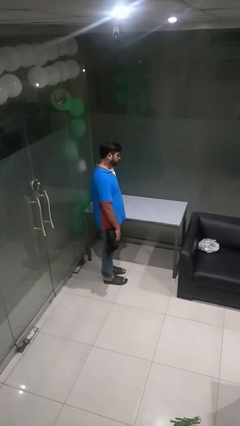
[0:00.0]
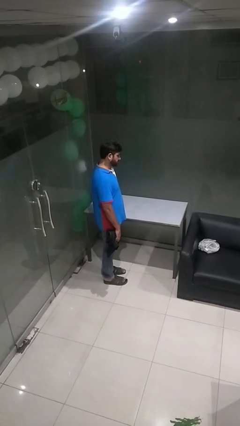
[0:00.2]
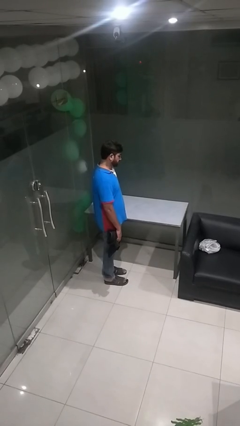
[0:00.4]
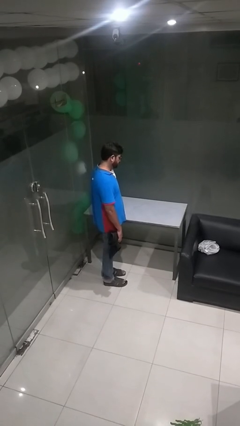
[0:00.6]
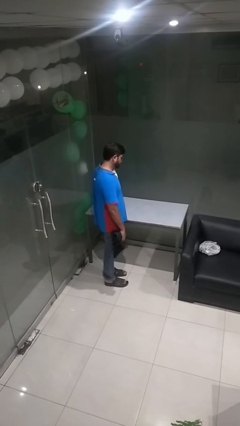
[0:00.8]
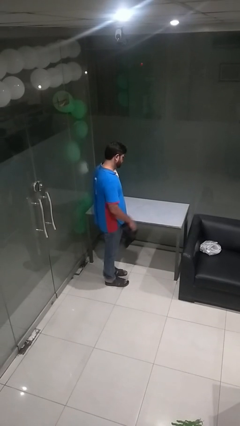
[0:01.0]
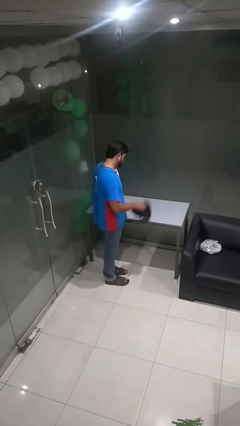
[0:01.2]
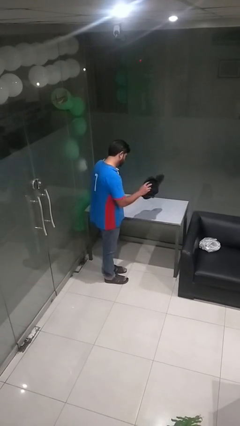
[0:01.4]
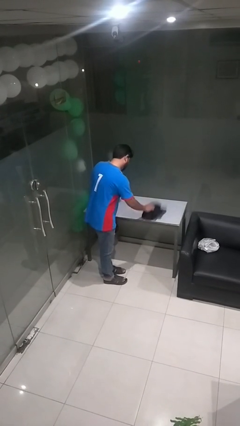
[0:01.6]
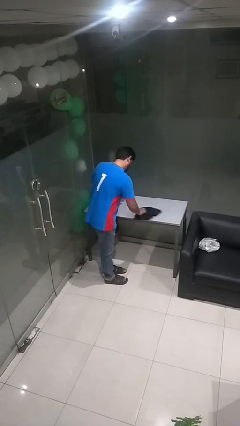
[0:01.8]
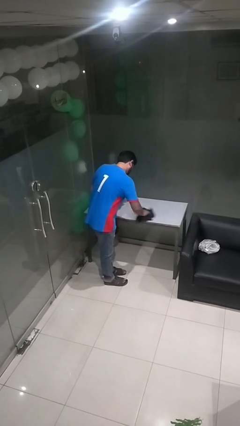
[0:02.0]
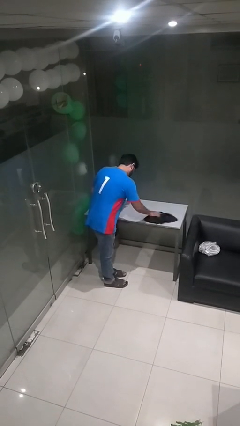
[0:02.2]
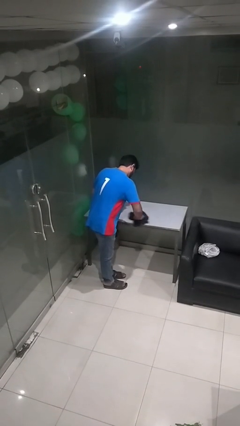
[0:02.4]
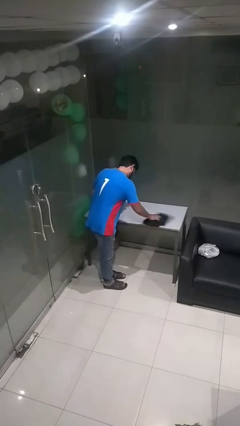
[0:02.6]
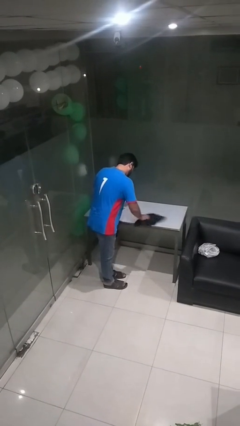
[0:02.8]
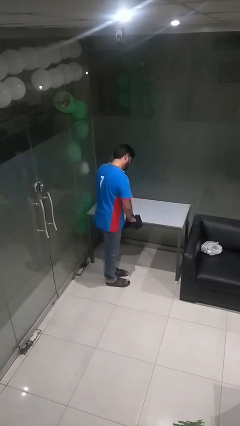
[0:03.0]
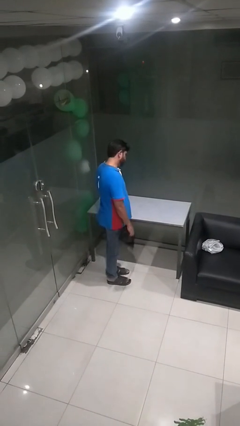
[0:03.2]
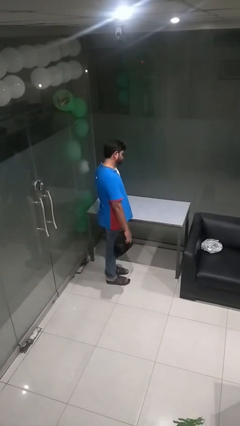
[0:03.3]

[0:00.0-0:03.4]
person dusts furniture

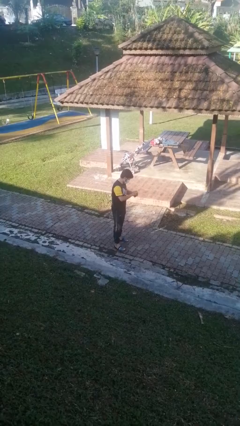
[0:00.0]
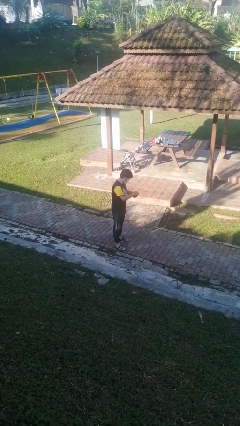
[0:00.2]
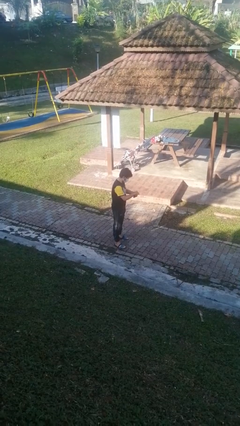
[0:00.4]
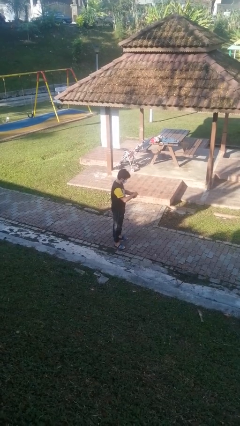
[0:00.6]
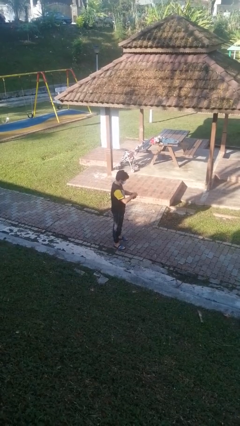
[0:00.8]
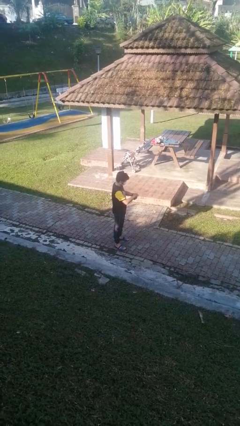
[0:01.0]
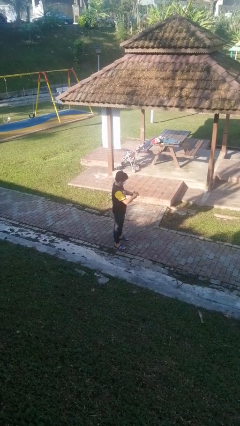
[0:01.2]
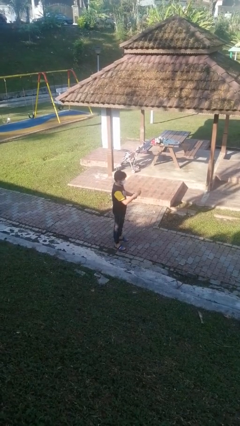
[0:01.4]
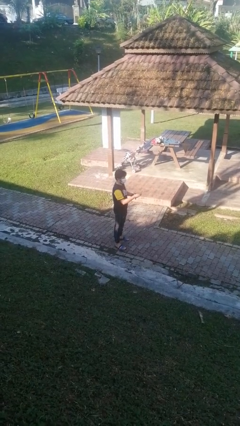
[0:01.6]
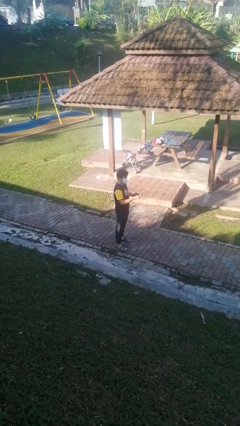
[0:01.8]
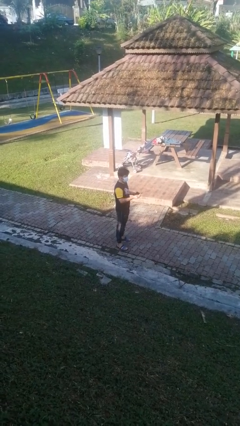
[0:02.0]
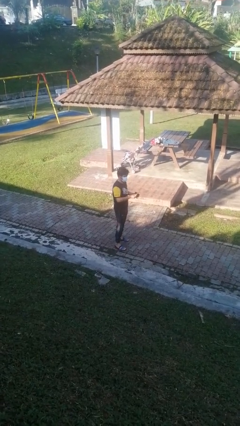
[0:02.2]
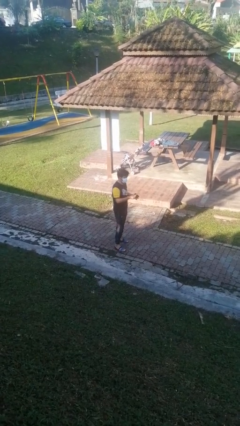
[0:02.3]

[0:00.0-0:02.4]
person takes object from purse

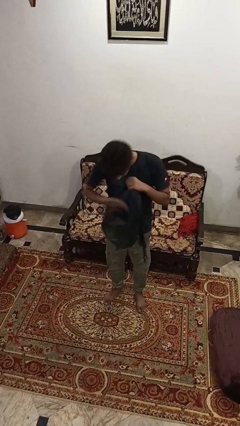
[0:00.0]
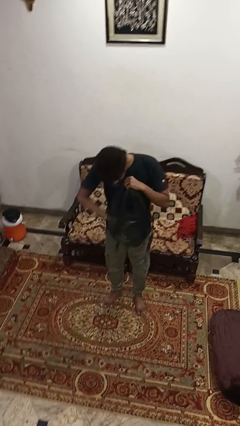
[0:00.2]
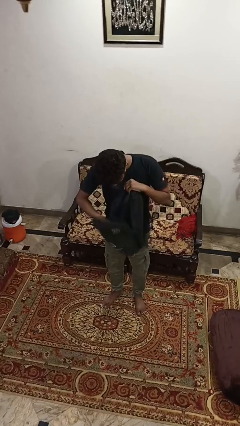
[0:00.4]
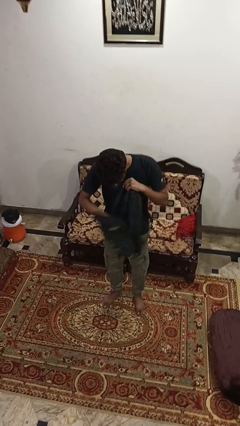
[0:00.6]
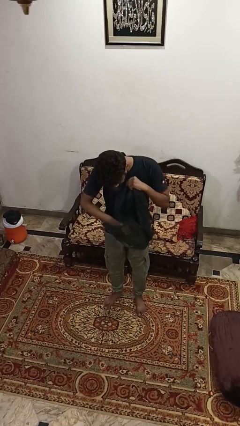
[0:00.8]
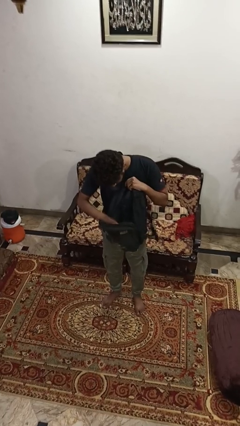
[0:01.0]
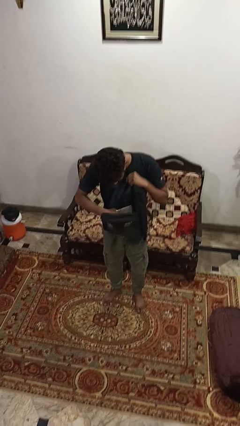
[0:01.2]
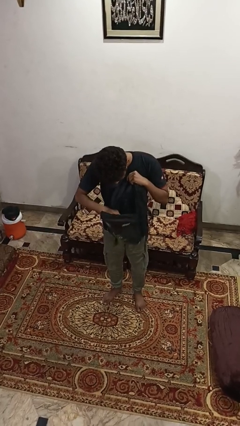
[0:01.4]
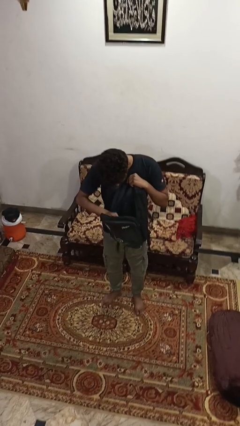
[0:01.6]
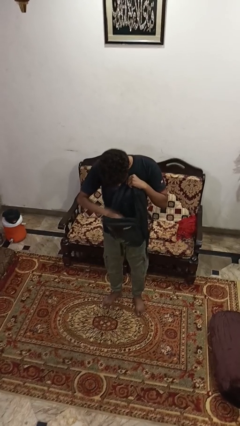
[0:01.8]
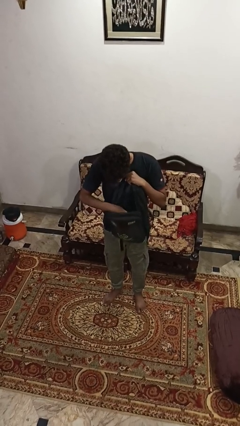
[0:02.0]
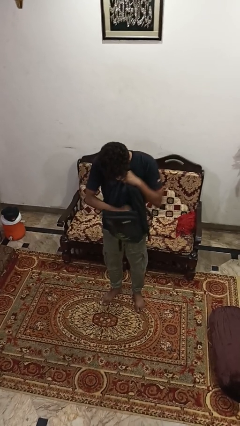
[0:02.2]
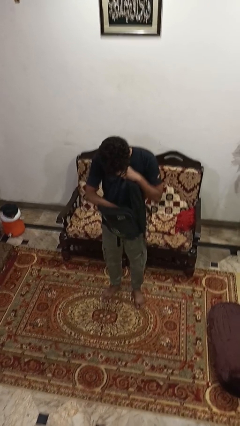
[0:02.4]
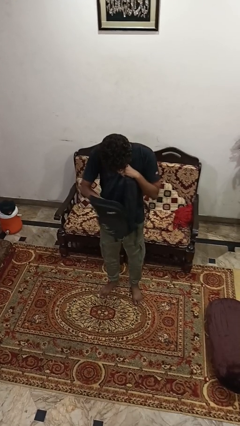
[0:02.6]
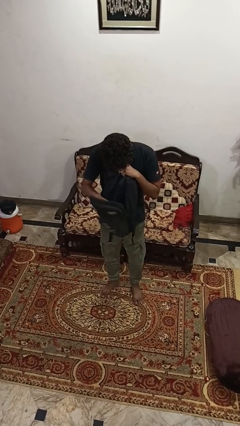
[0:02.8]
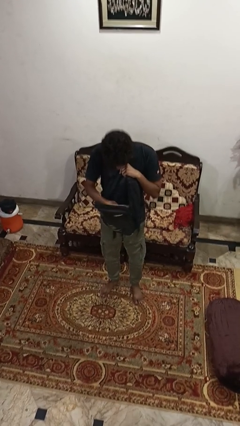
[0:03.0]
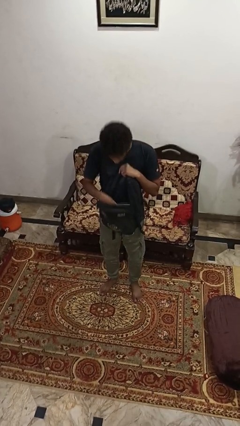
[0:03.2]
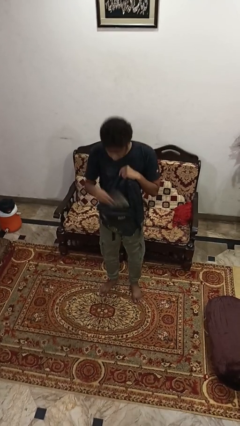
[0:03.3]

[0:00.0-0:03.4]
person searches in backpack

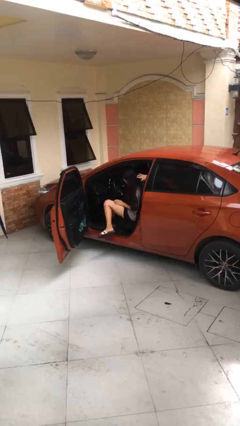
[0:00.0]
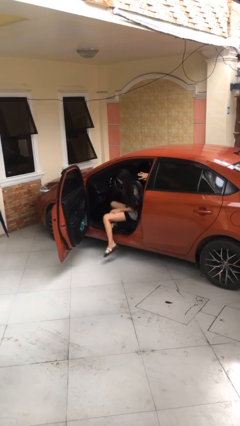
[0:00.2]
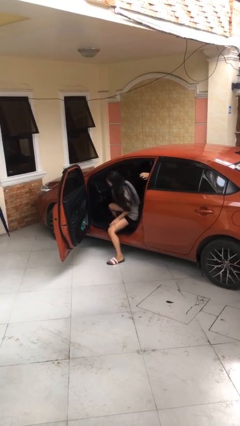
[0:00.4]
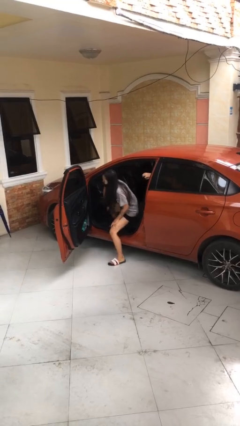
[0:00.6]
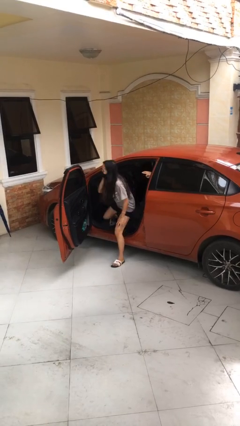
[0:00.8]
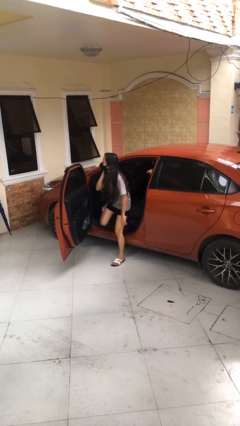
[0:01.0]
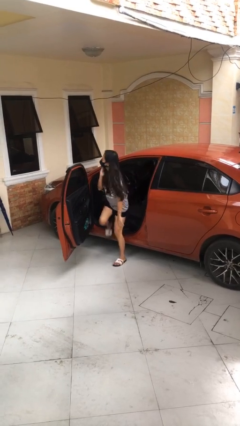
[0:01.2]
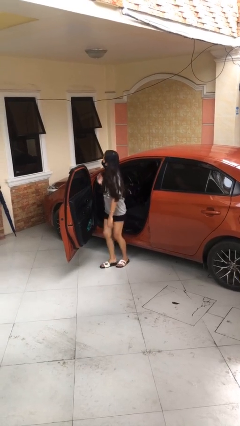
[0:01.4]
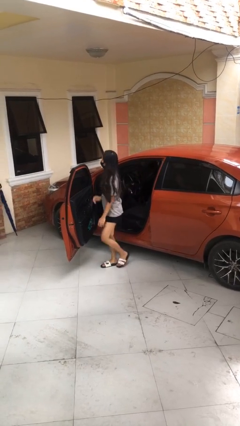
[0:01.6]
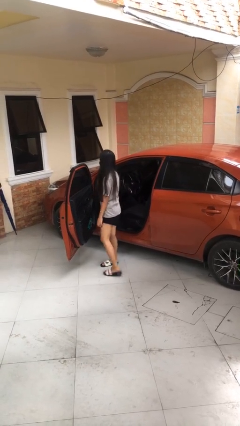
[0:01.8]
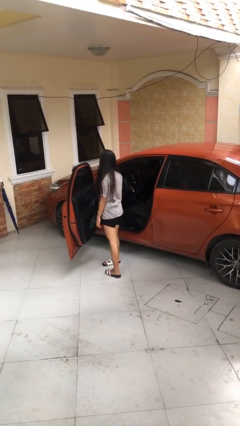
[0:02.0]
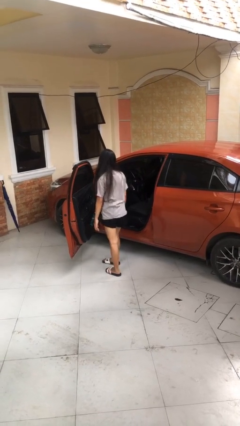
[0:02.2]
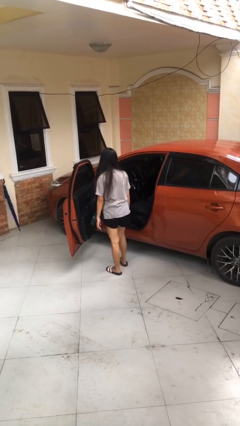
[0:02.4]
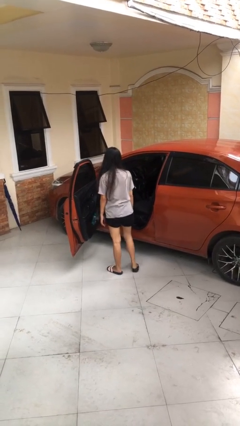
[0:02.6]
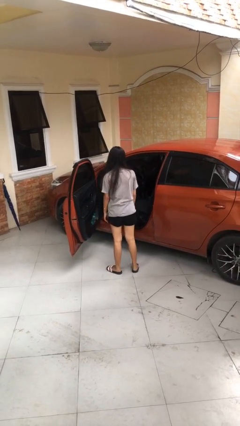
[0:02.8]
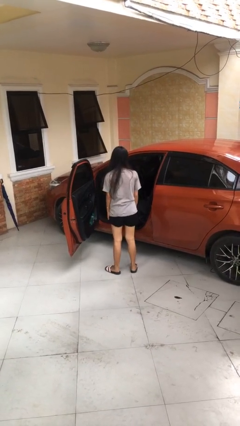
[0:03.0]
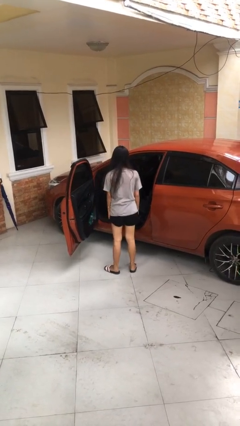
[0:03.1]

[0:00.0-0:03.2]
person exits car

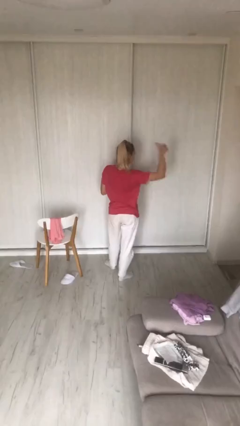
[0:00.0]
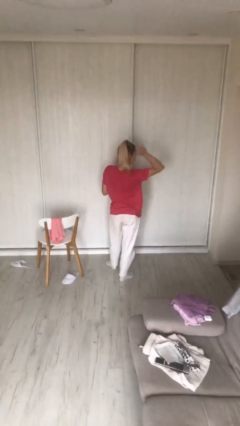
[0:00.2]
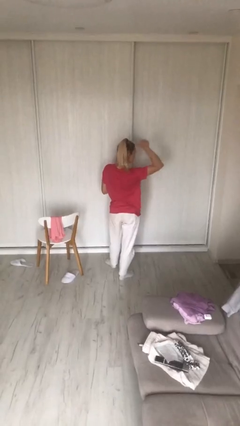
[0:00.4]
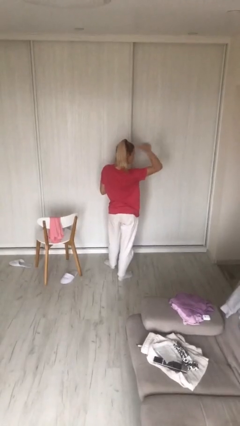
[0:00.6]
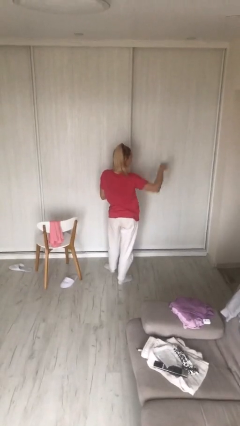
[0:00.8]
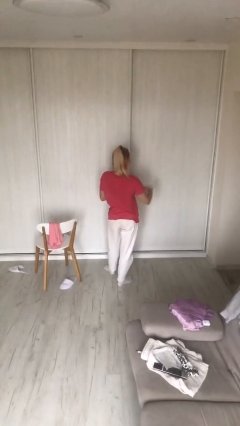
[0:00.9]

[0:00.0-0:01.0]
person gestures behind me

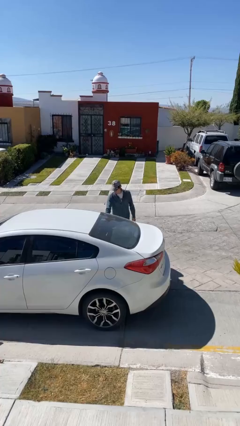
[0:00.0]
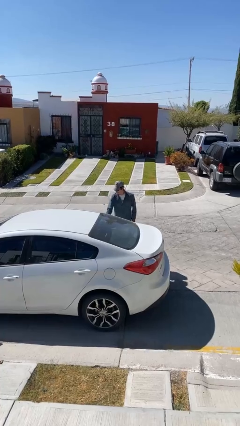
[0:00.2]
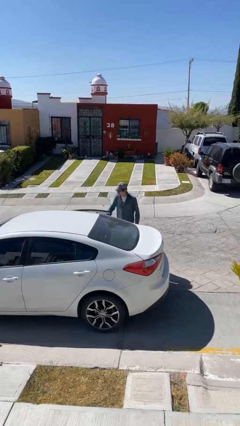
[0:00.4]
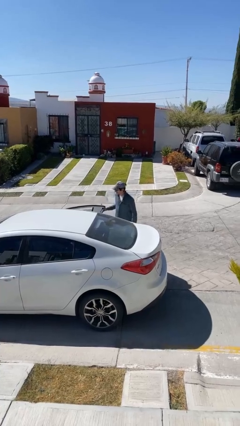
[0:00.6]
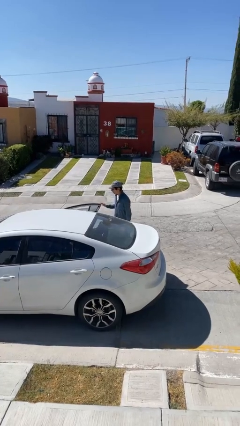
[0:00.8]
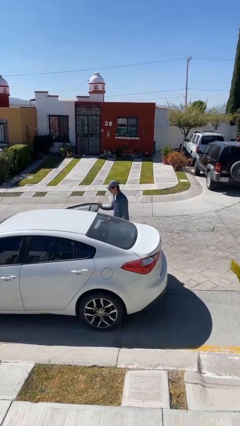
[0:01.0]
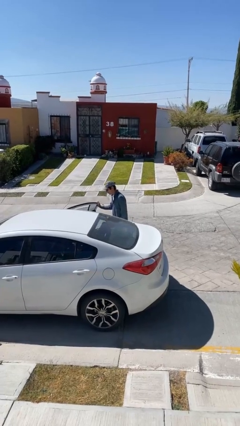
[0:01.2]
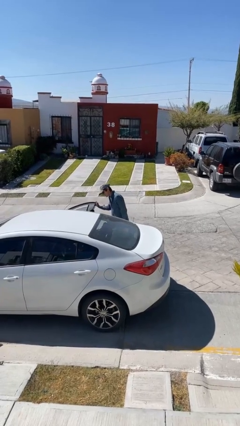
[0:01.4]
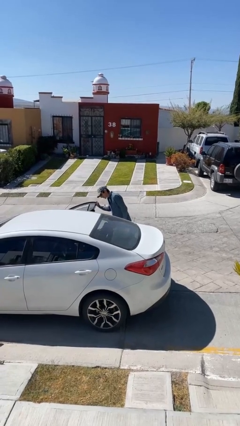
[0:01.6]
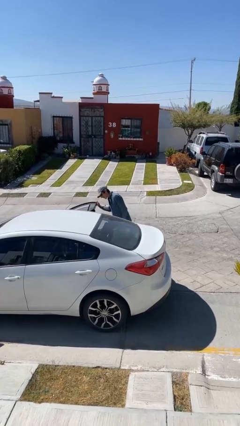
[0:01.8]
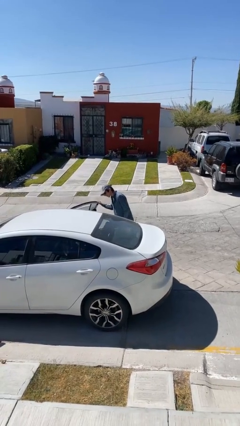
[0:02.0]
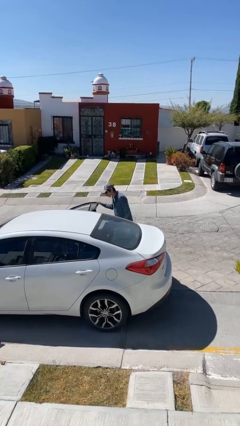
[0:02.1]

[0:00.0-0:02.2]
person opens car door

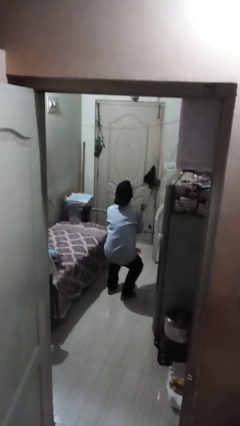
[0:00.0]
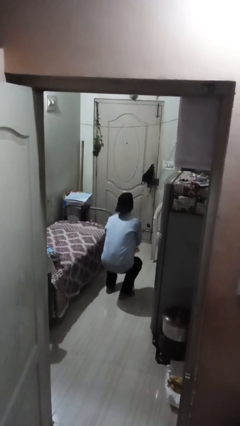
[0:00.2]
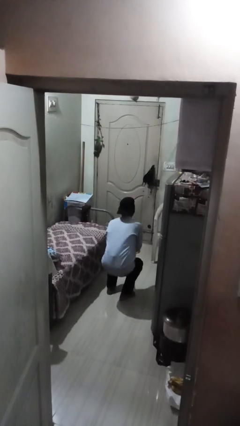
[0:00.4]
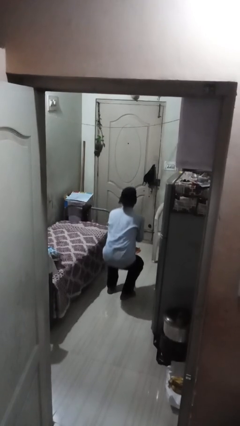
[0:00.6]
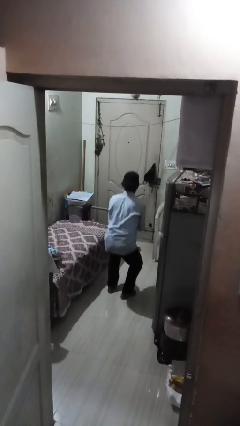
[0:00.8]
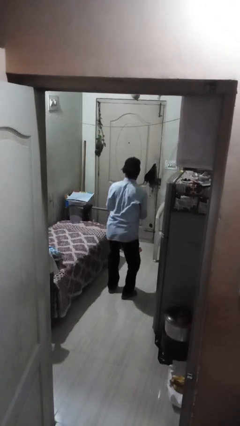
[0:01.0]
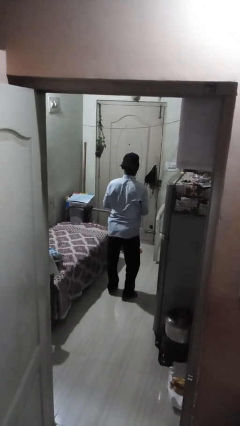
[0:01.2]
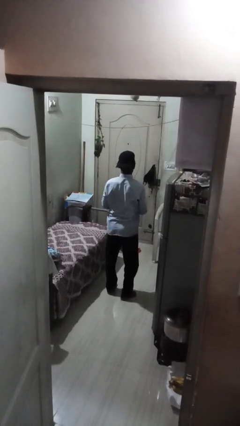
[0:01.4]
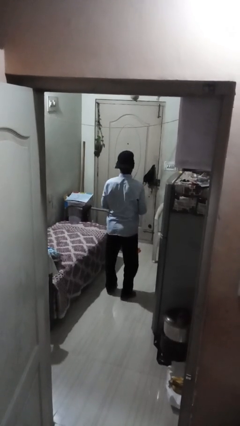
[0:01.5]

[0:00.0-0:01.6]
person catches dropped object
